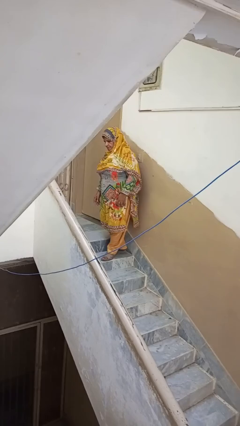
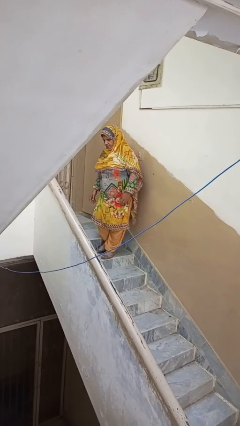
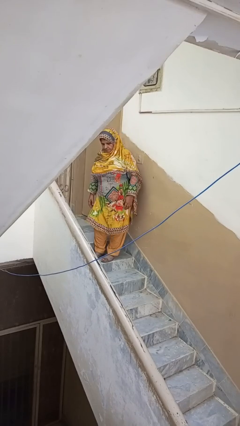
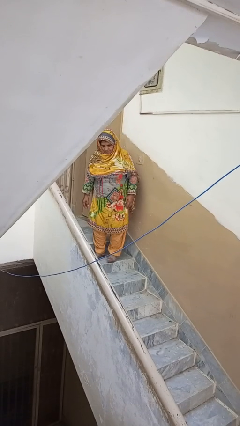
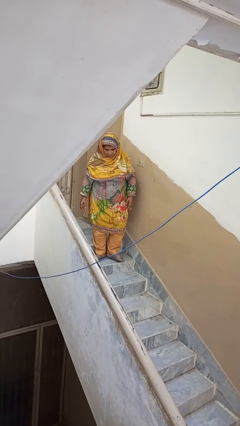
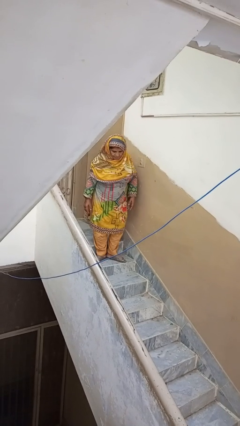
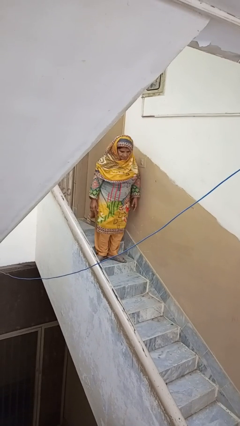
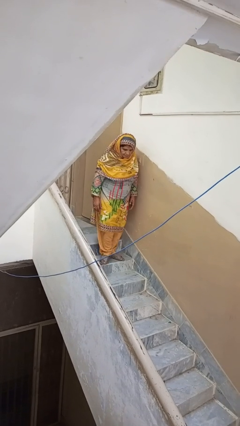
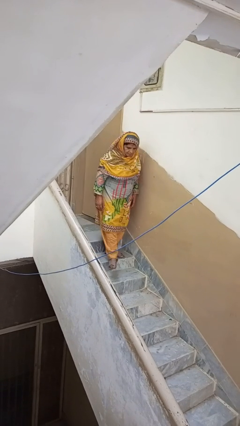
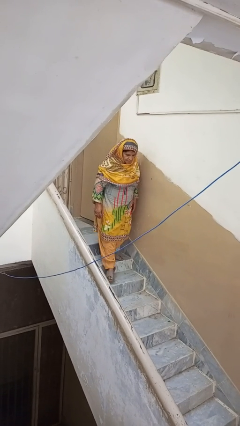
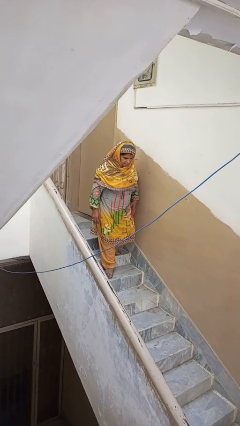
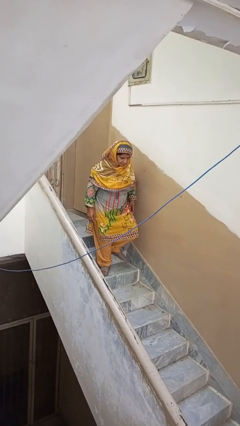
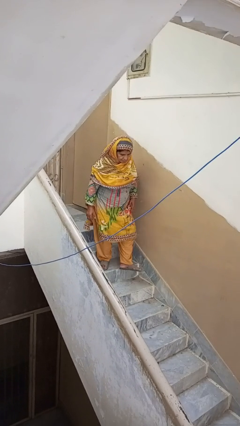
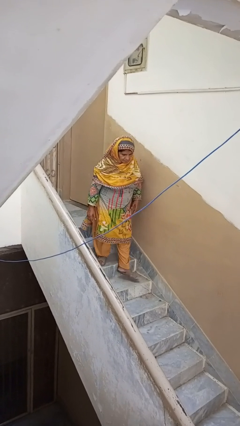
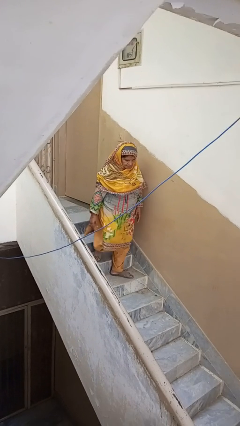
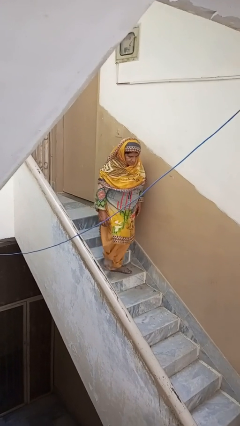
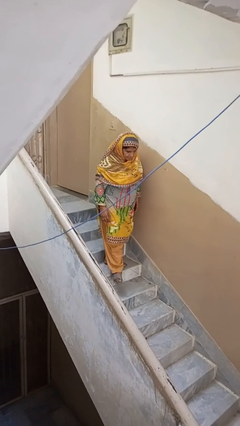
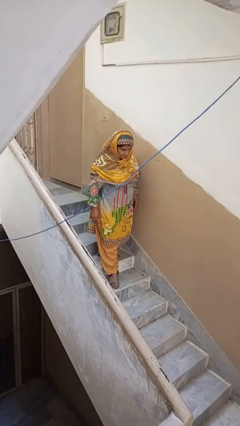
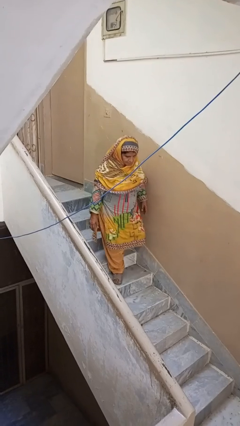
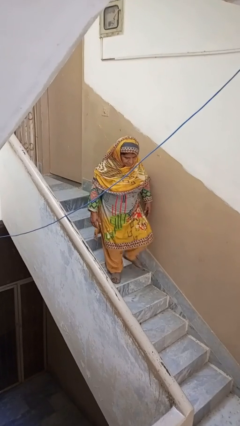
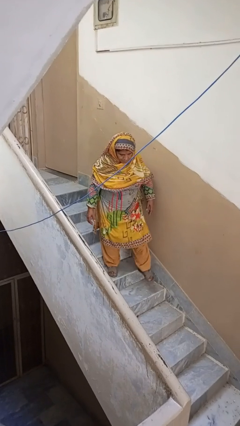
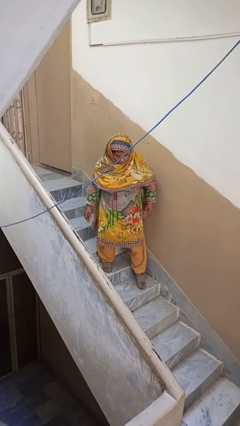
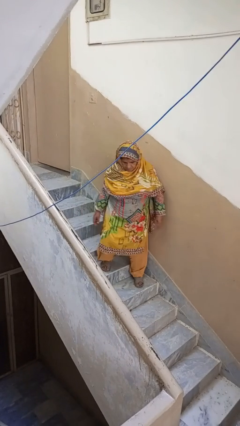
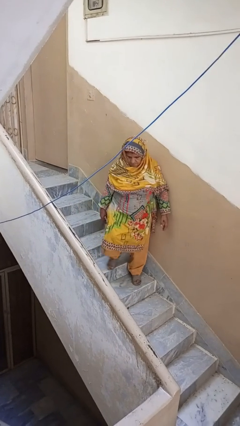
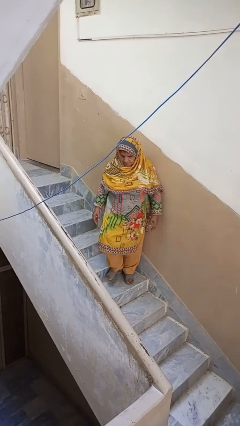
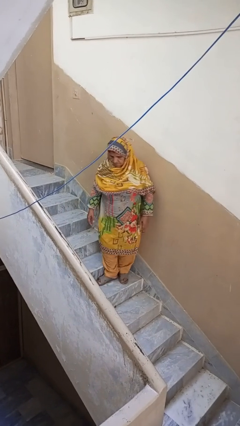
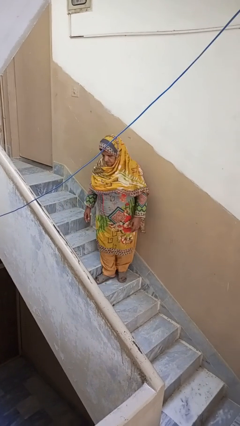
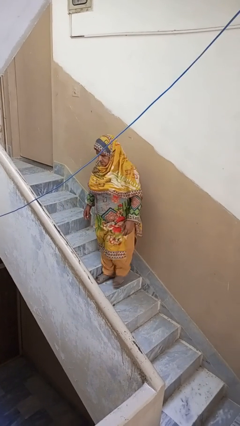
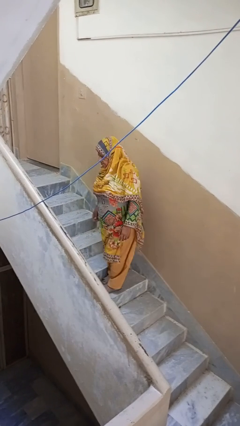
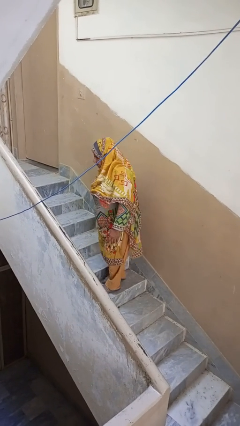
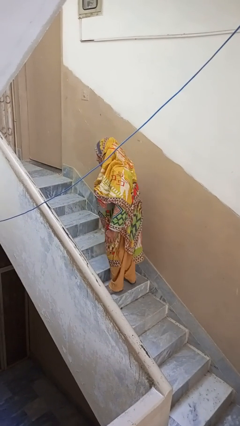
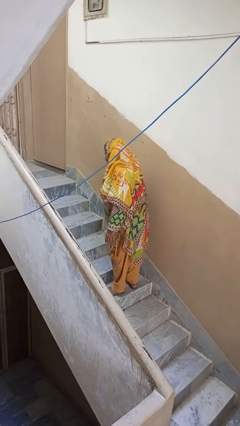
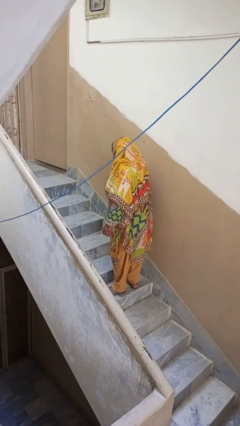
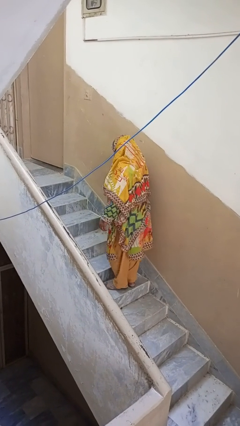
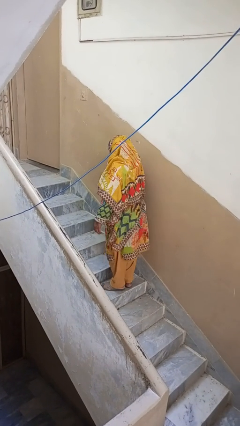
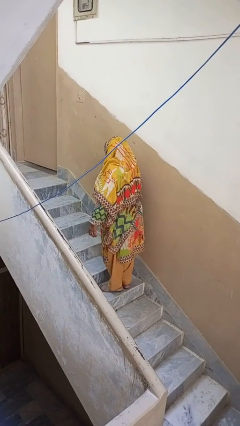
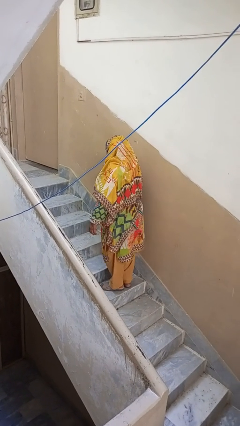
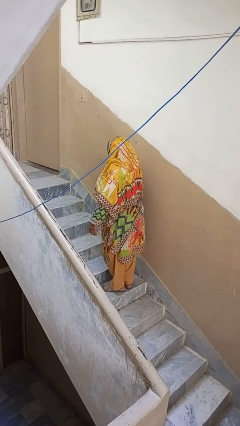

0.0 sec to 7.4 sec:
person climbs down stairs

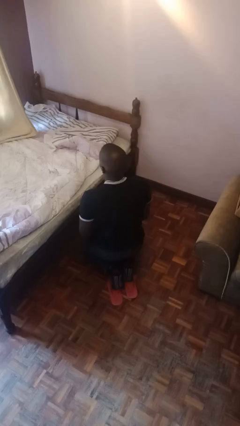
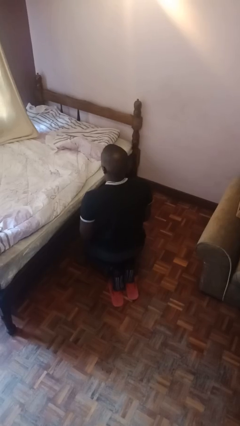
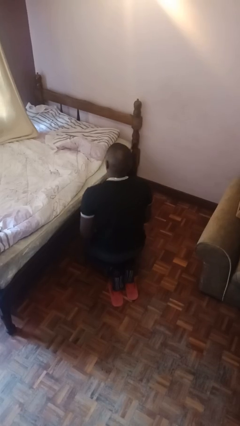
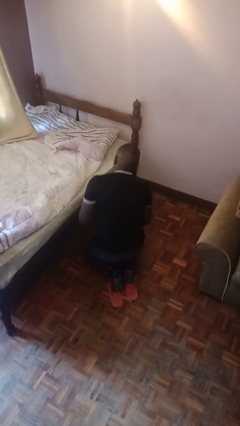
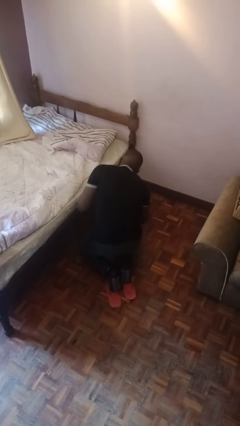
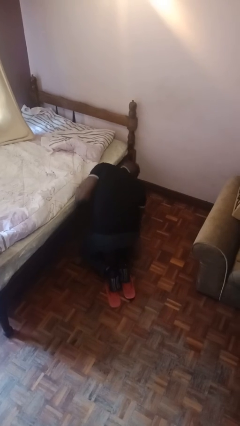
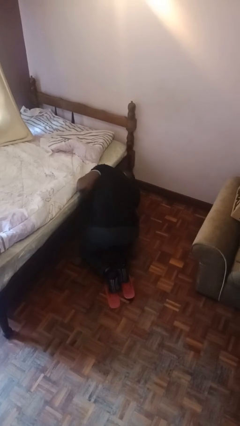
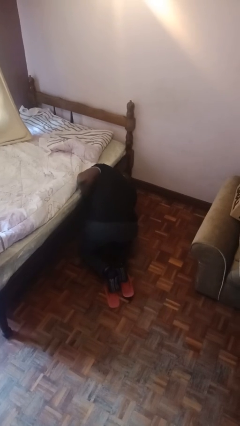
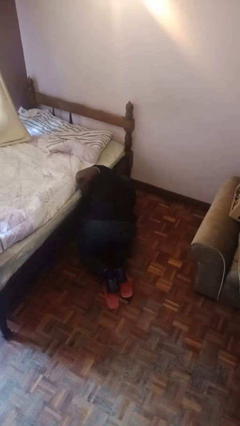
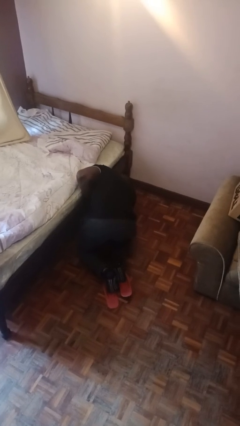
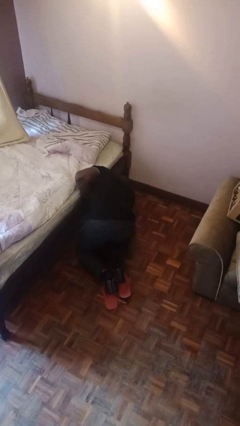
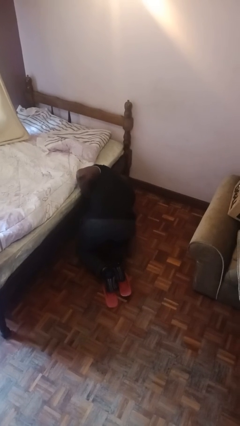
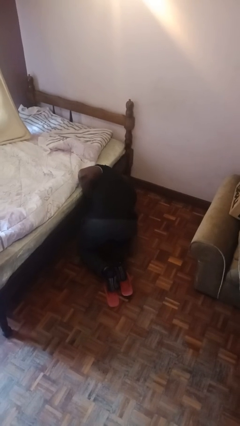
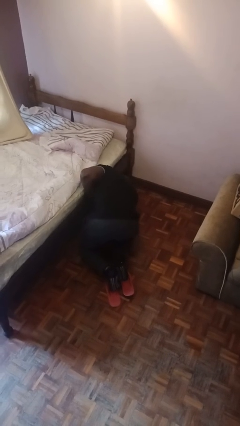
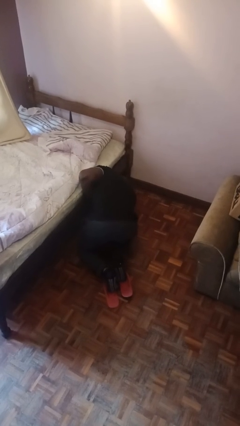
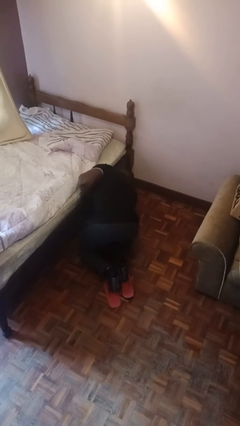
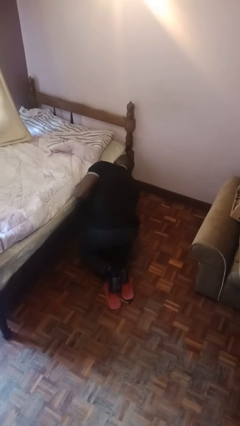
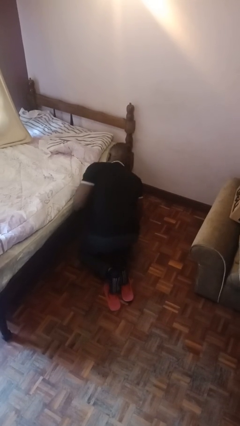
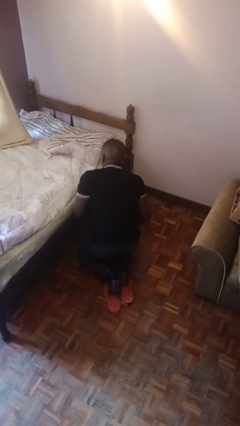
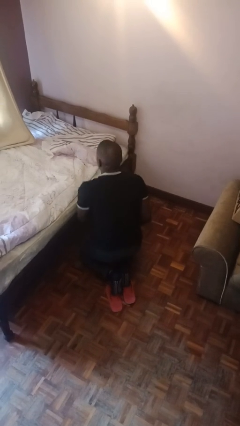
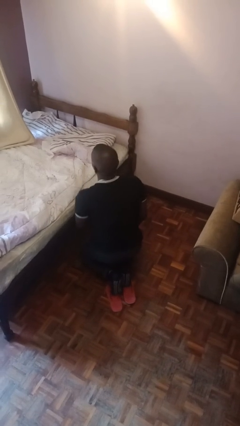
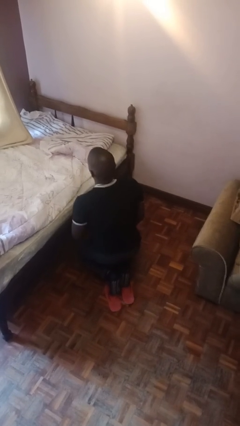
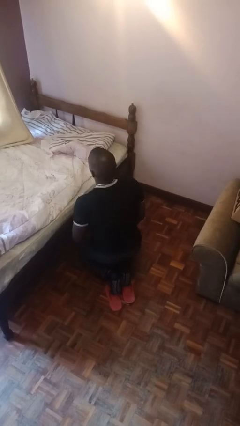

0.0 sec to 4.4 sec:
person searches under bed

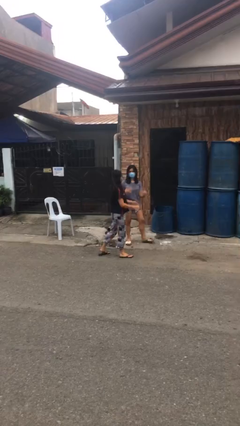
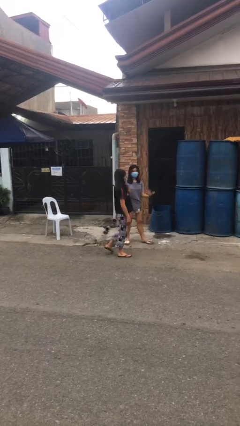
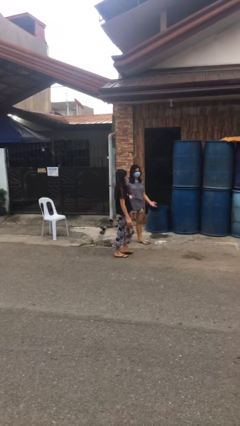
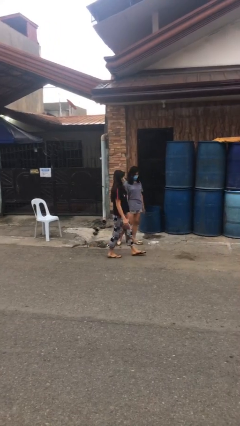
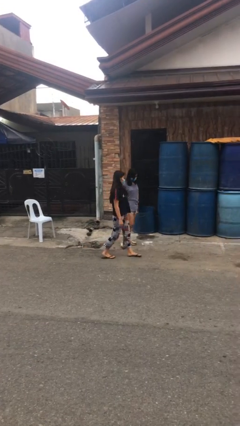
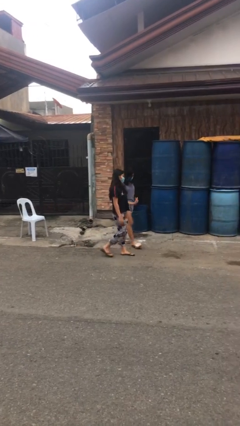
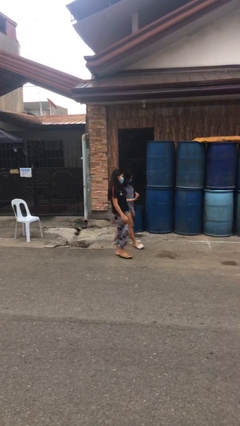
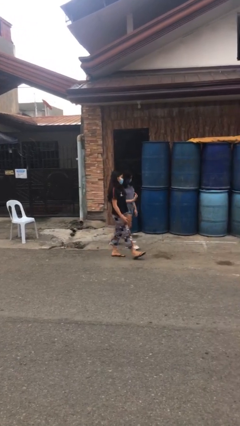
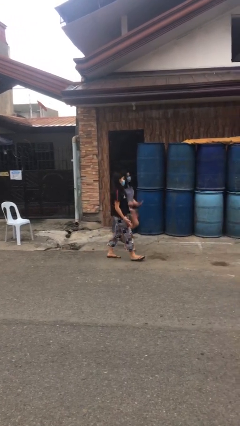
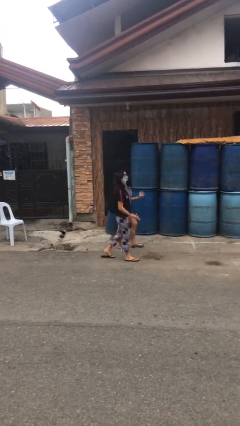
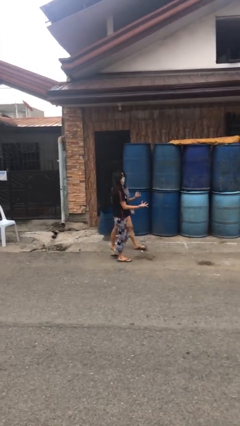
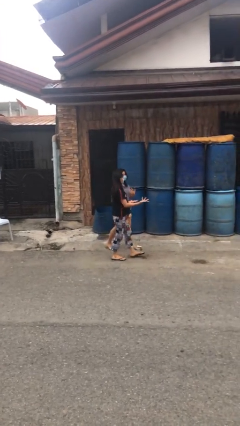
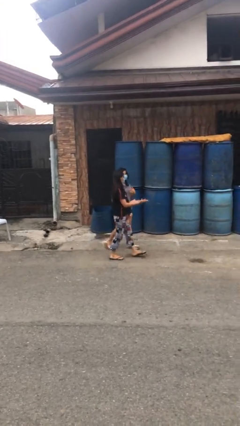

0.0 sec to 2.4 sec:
person talks to person

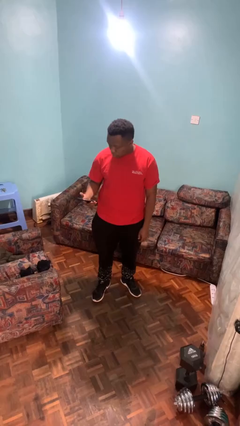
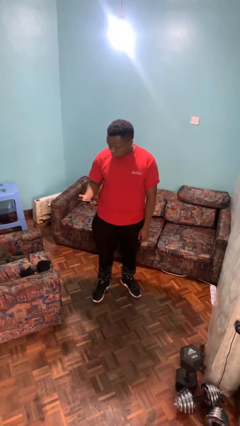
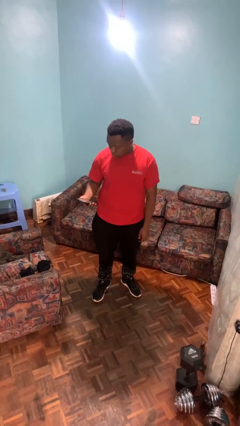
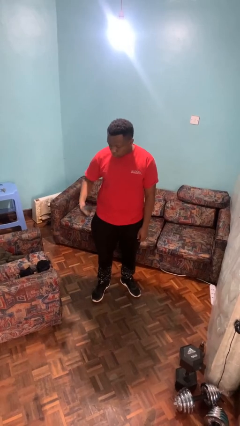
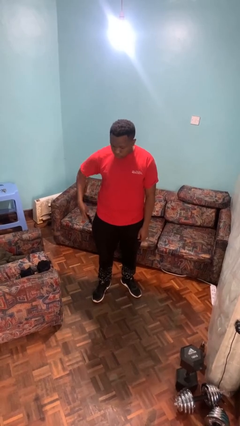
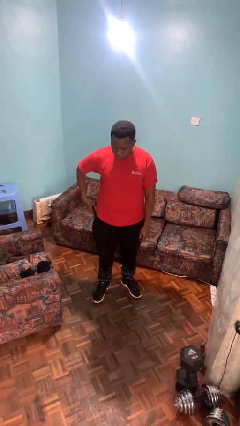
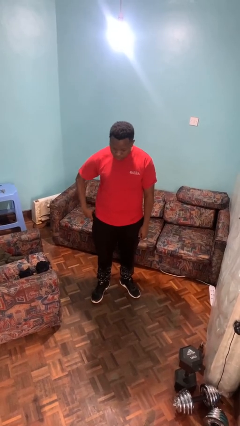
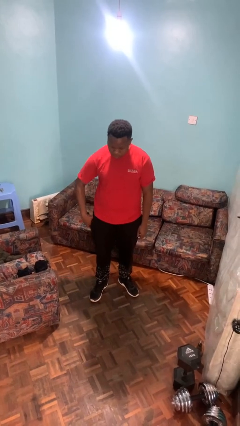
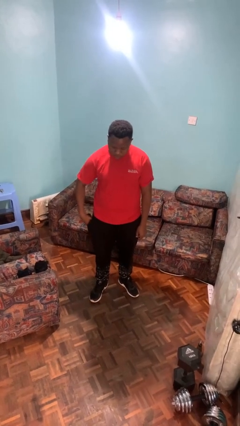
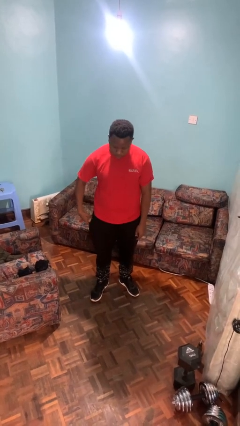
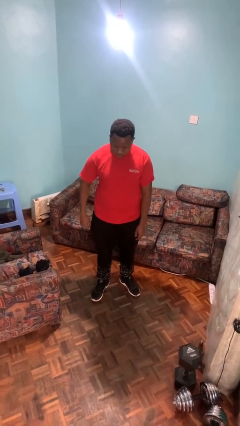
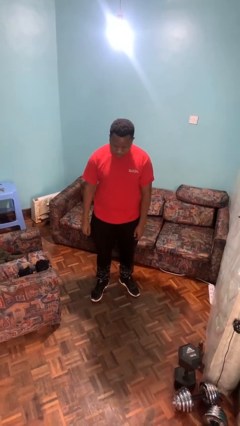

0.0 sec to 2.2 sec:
person puts phone into pocket

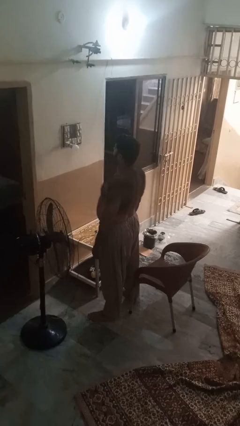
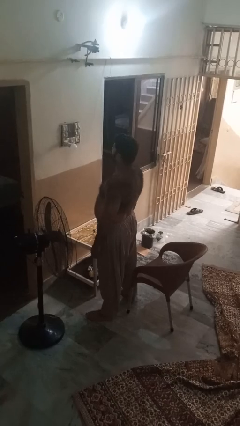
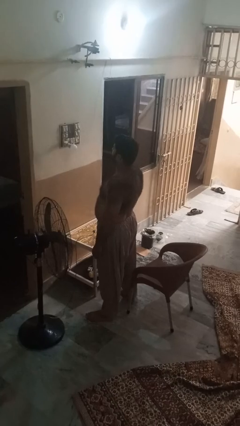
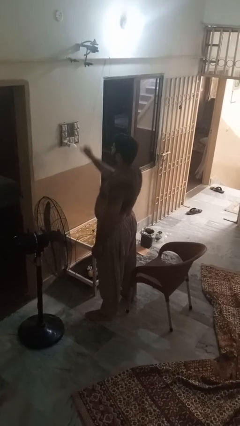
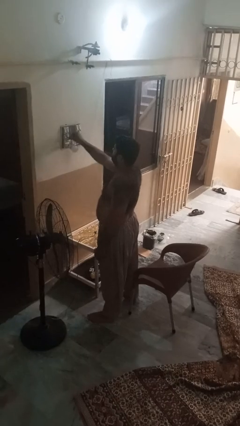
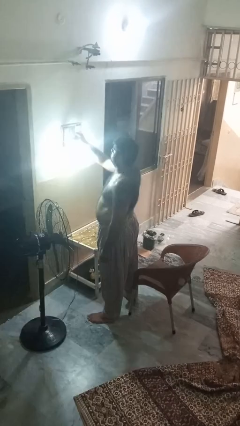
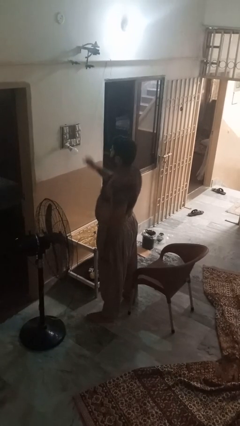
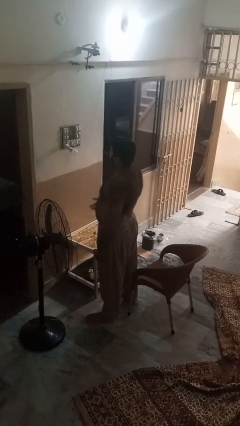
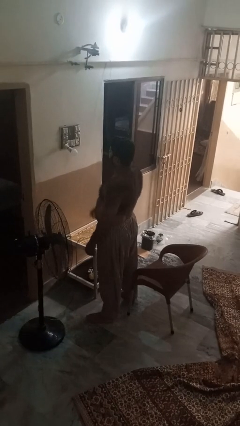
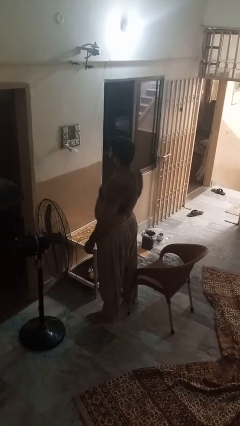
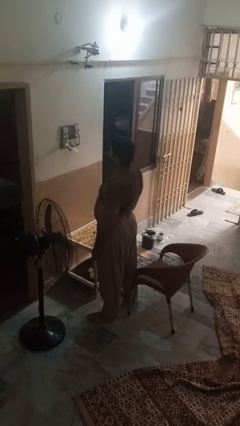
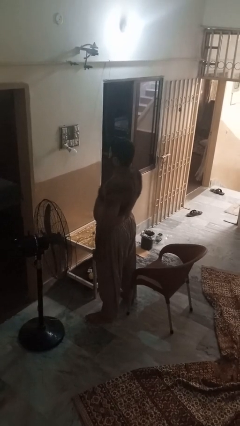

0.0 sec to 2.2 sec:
person turns on lamp
